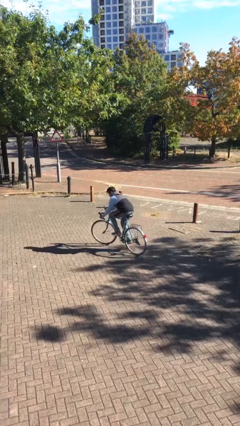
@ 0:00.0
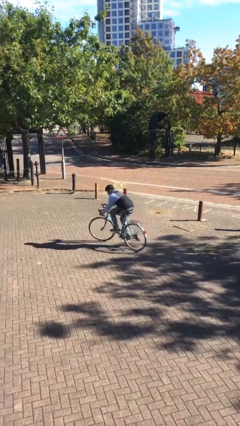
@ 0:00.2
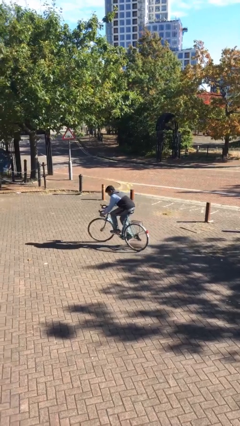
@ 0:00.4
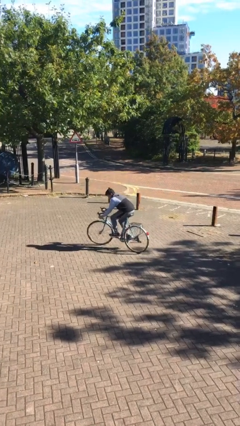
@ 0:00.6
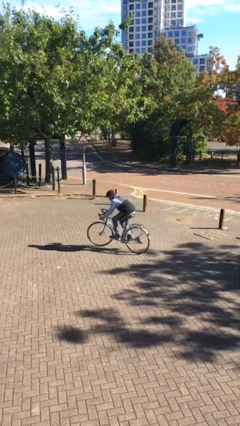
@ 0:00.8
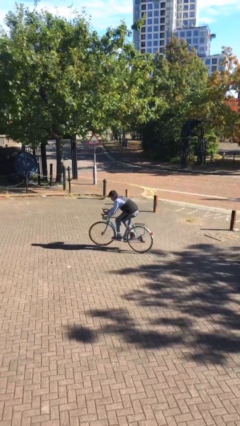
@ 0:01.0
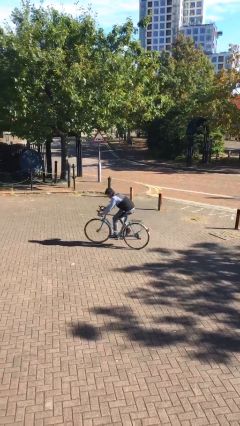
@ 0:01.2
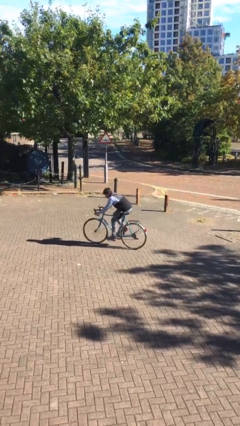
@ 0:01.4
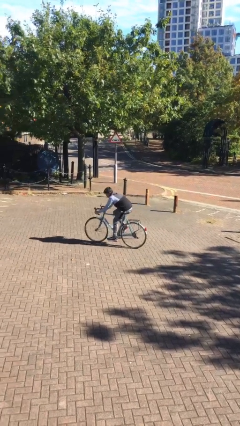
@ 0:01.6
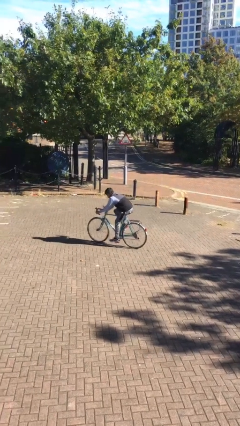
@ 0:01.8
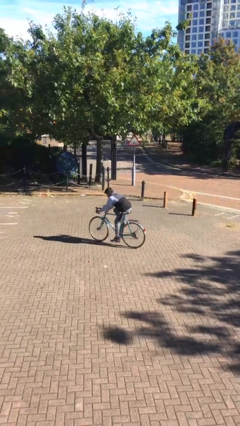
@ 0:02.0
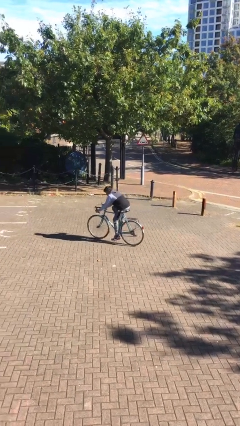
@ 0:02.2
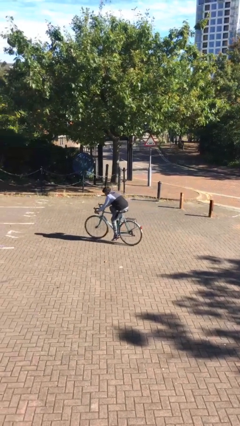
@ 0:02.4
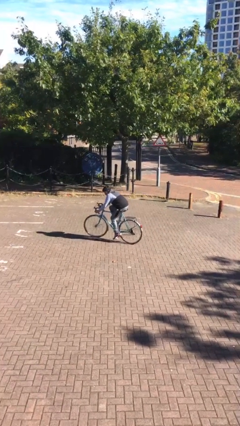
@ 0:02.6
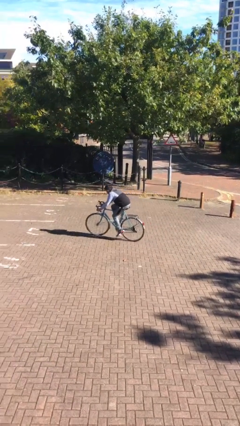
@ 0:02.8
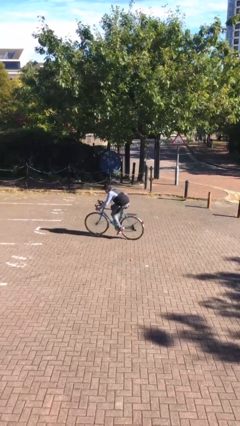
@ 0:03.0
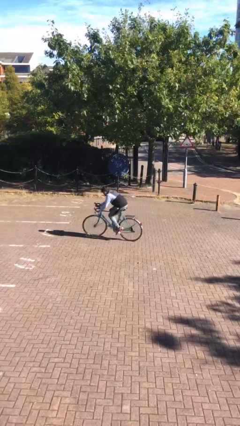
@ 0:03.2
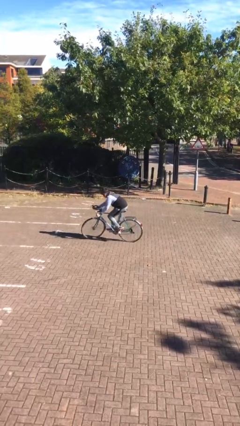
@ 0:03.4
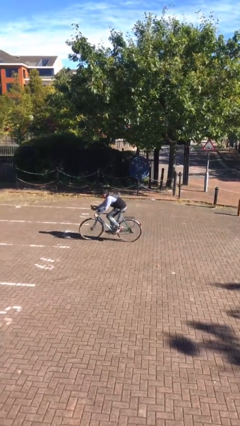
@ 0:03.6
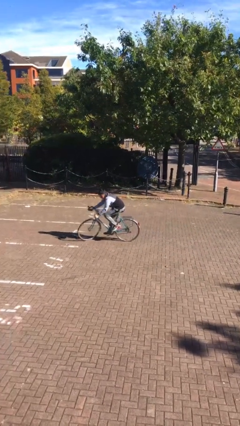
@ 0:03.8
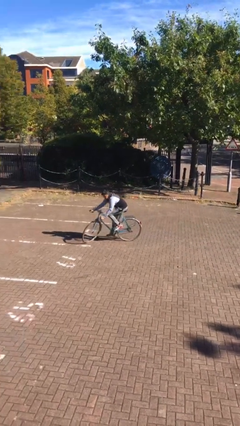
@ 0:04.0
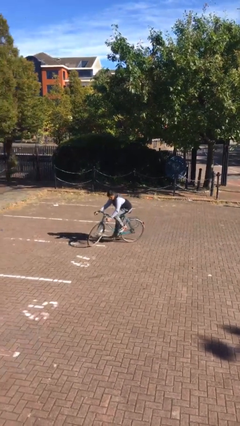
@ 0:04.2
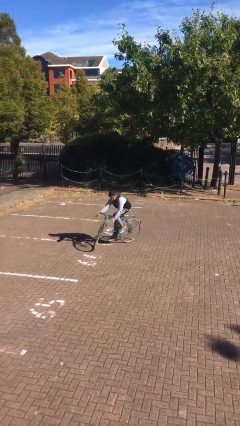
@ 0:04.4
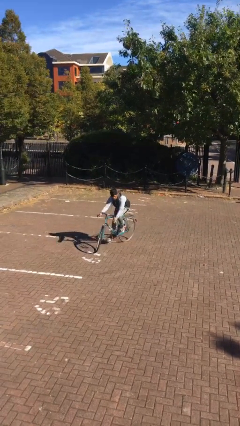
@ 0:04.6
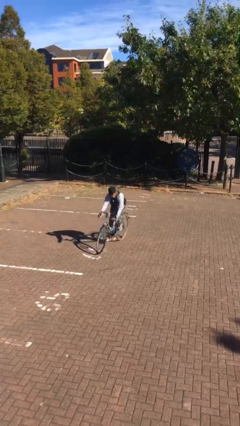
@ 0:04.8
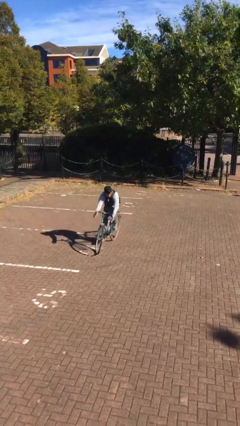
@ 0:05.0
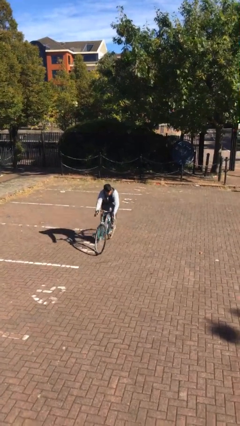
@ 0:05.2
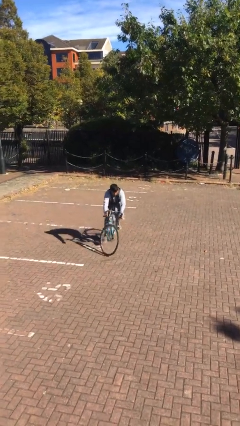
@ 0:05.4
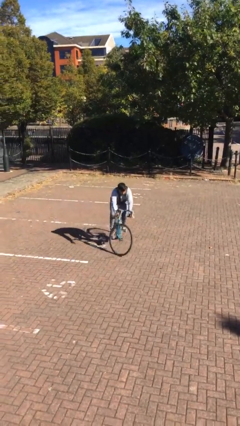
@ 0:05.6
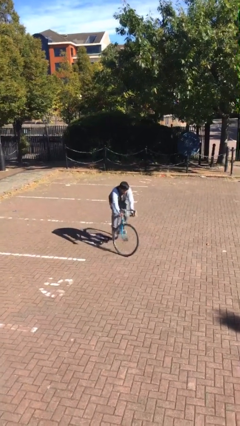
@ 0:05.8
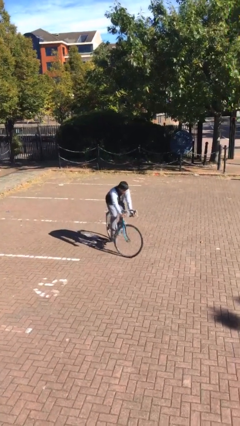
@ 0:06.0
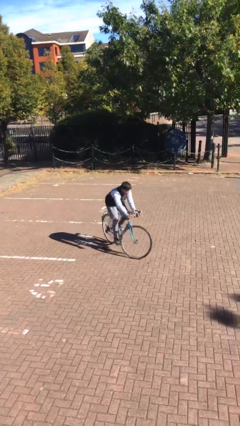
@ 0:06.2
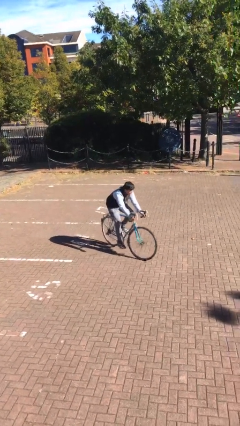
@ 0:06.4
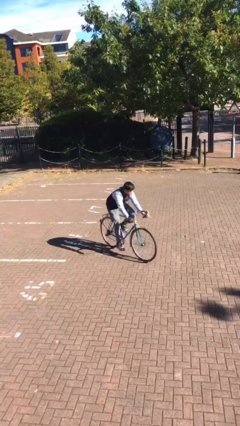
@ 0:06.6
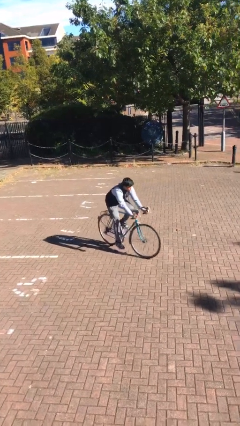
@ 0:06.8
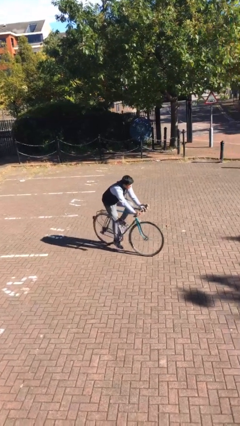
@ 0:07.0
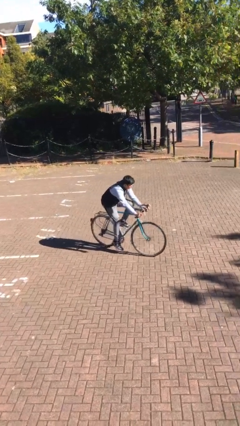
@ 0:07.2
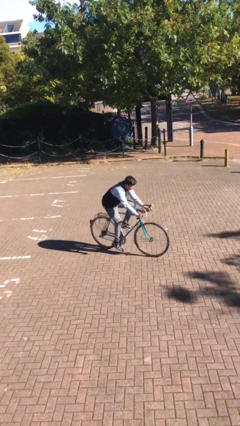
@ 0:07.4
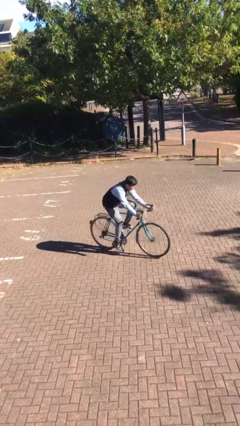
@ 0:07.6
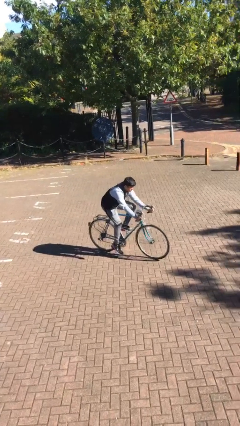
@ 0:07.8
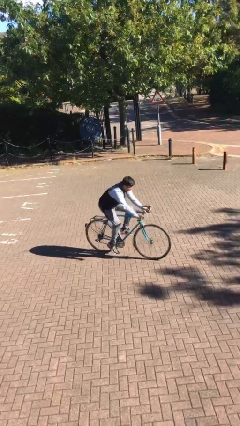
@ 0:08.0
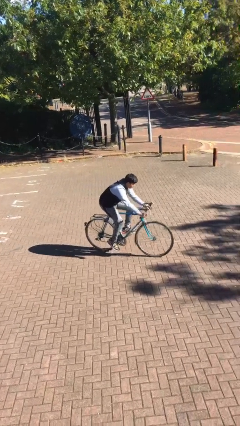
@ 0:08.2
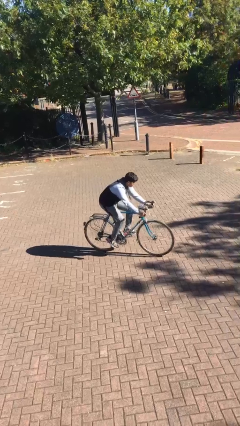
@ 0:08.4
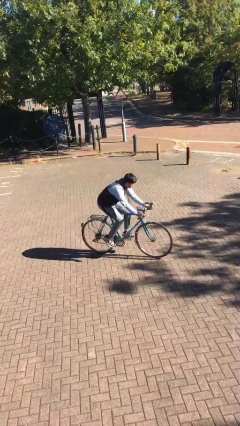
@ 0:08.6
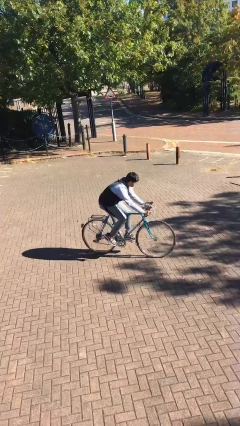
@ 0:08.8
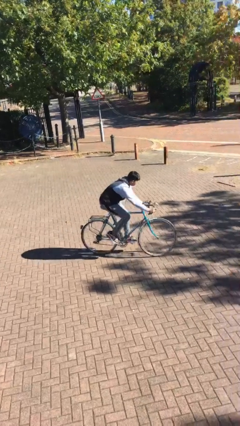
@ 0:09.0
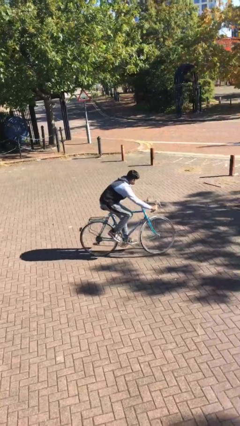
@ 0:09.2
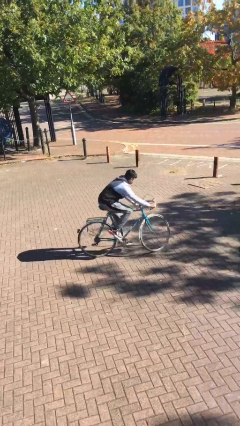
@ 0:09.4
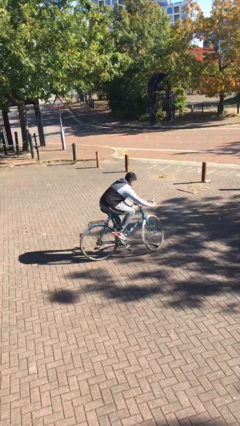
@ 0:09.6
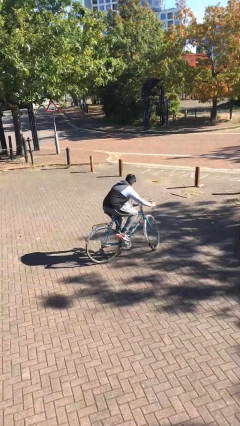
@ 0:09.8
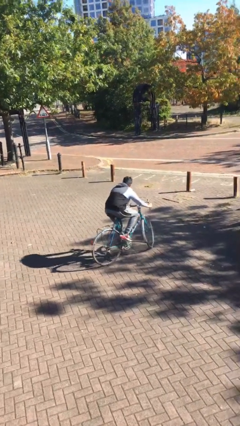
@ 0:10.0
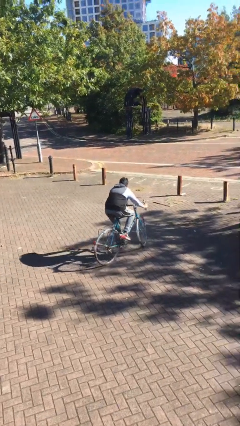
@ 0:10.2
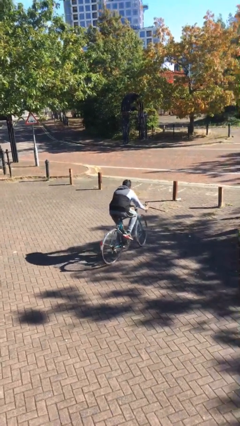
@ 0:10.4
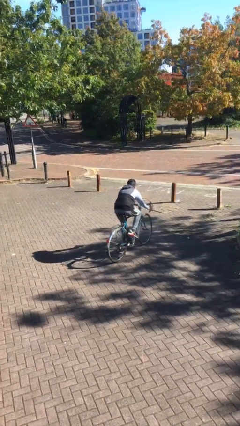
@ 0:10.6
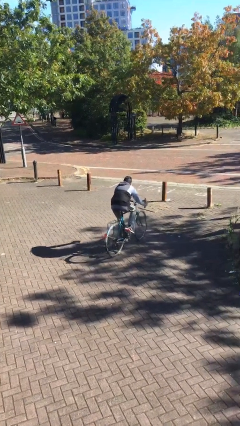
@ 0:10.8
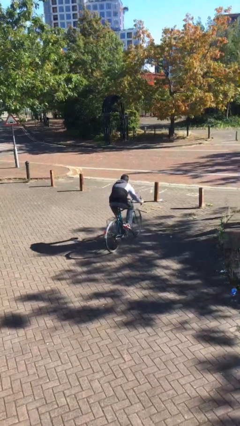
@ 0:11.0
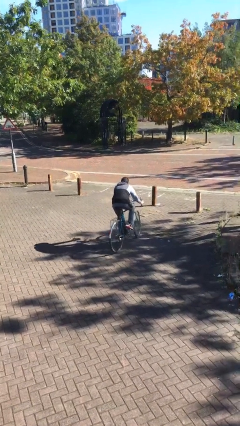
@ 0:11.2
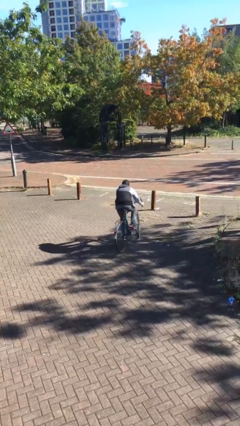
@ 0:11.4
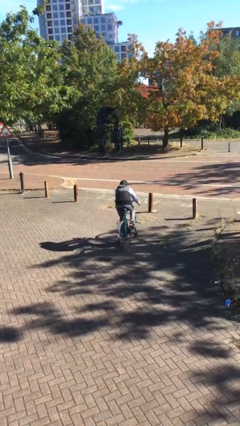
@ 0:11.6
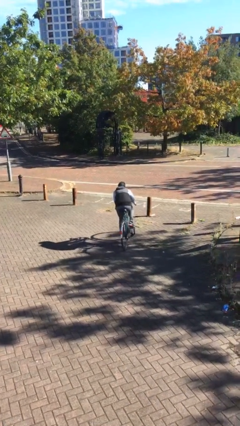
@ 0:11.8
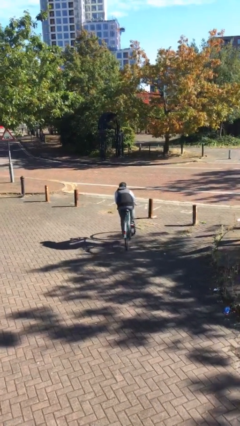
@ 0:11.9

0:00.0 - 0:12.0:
person rides bicycle

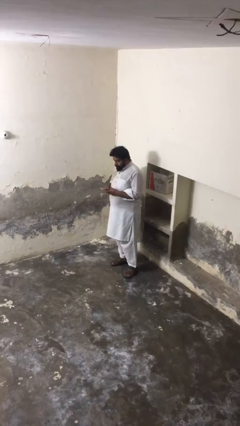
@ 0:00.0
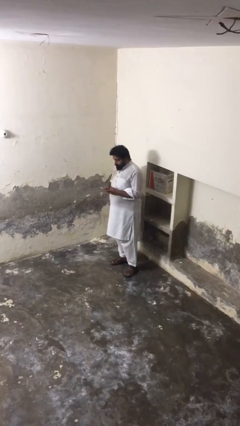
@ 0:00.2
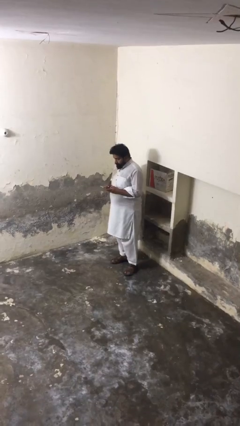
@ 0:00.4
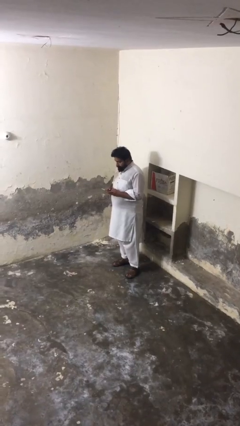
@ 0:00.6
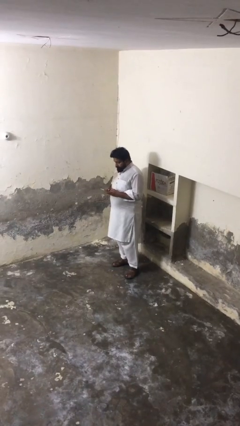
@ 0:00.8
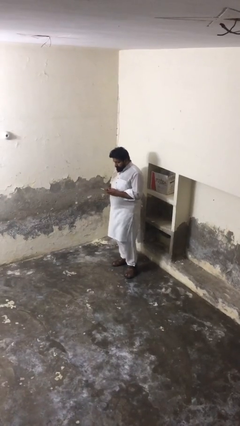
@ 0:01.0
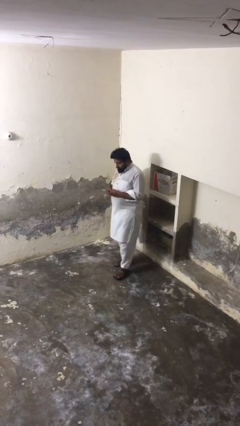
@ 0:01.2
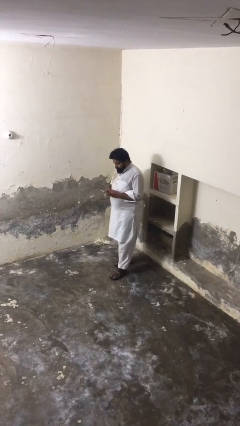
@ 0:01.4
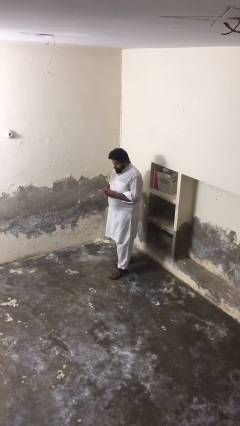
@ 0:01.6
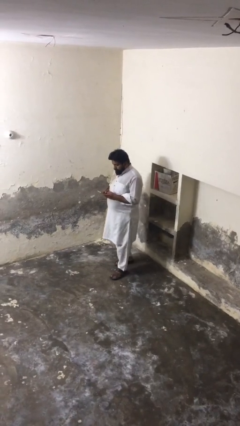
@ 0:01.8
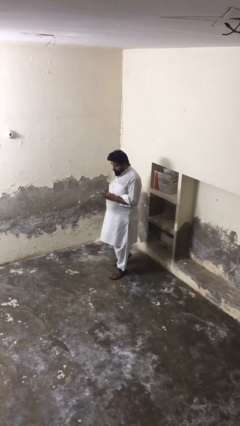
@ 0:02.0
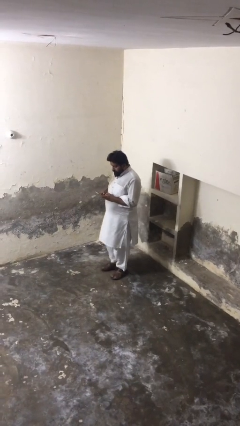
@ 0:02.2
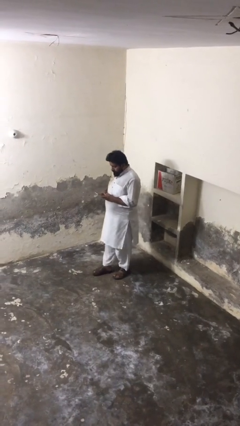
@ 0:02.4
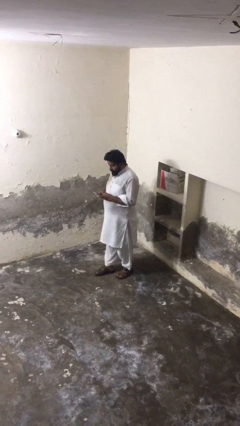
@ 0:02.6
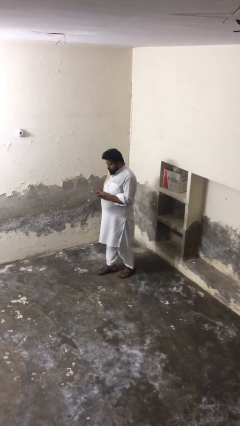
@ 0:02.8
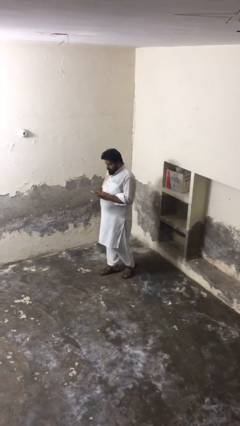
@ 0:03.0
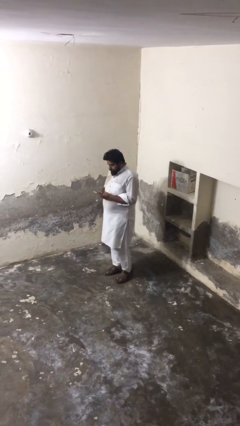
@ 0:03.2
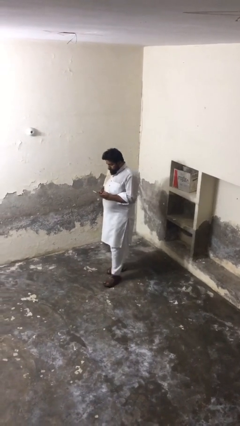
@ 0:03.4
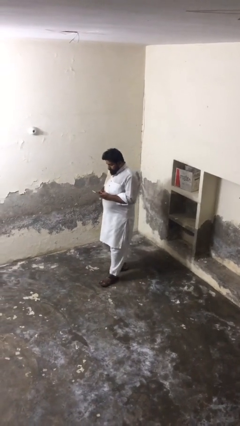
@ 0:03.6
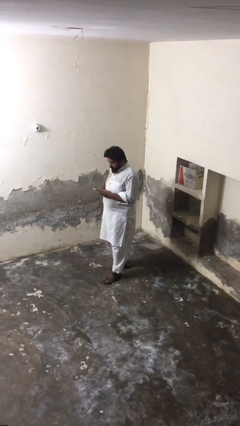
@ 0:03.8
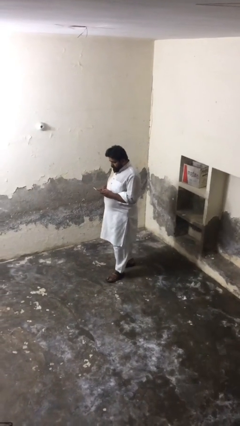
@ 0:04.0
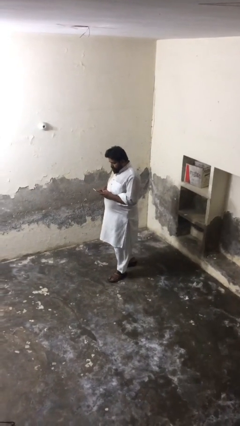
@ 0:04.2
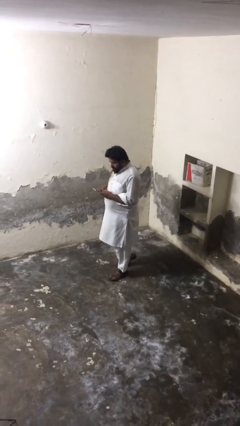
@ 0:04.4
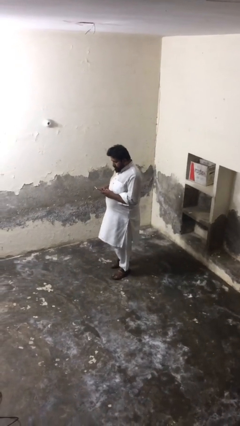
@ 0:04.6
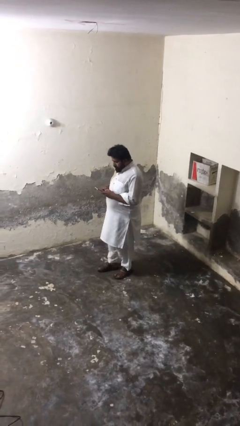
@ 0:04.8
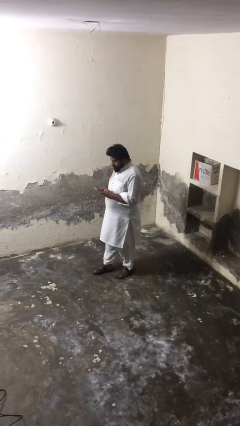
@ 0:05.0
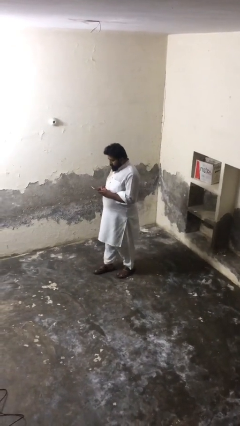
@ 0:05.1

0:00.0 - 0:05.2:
person texts on phone

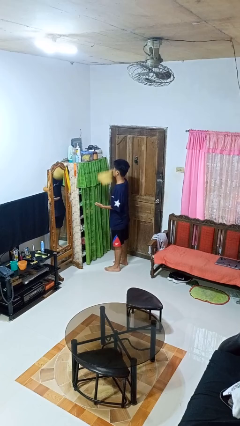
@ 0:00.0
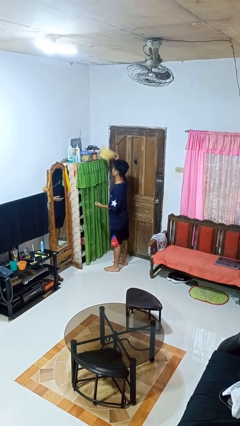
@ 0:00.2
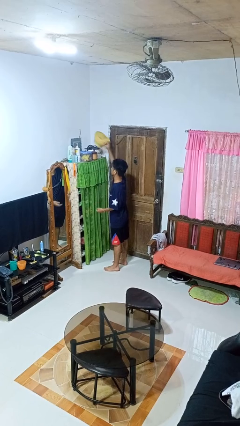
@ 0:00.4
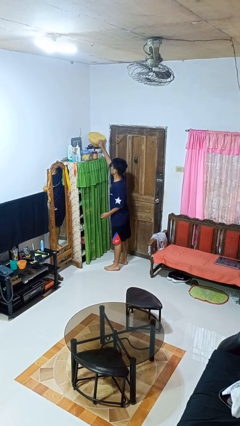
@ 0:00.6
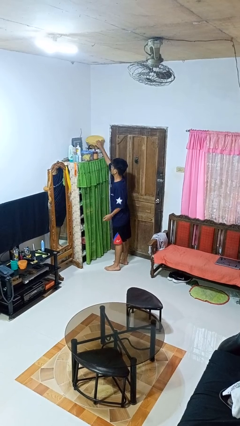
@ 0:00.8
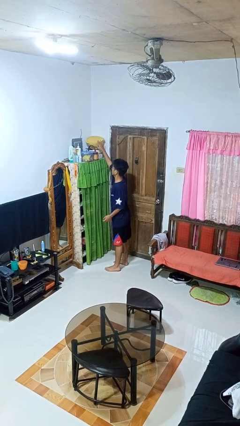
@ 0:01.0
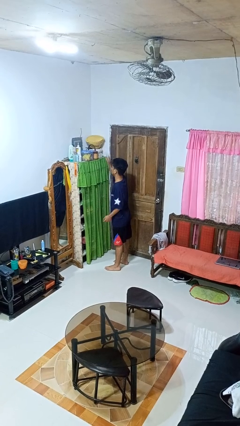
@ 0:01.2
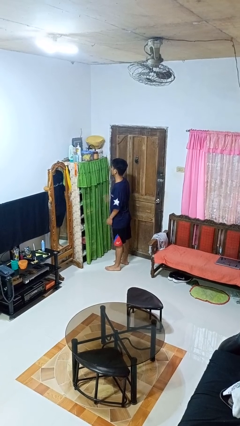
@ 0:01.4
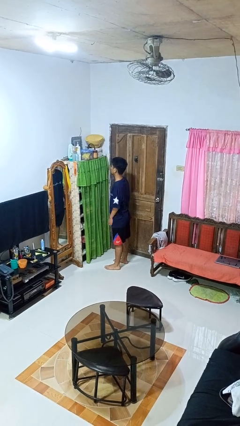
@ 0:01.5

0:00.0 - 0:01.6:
person puts down object on shelf
